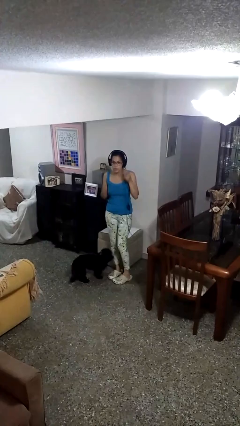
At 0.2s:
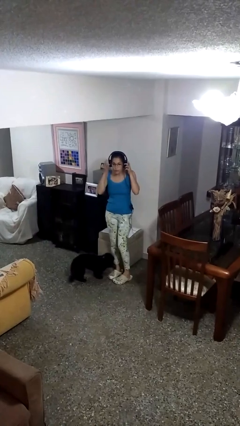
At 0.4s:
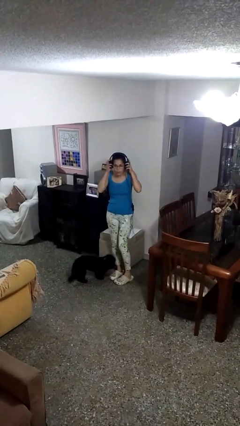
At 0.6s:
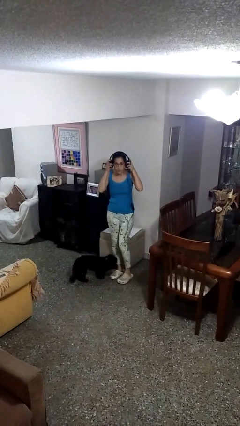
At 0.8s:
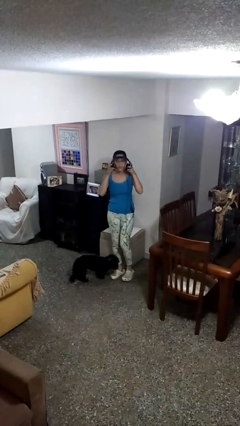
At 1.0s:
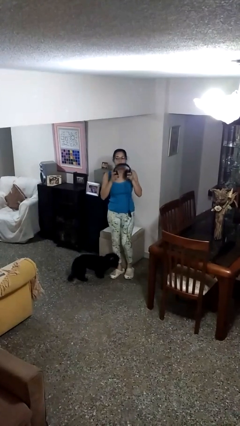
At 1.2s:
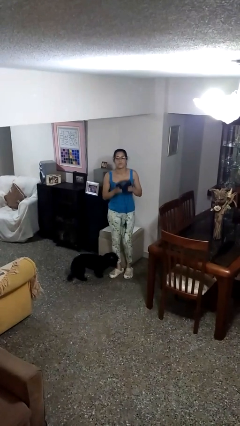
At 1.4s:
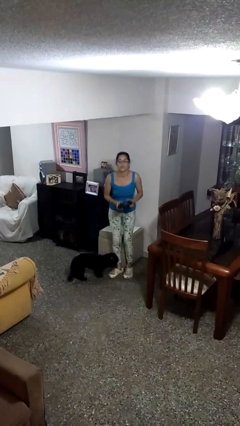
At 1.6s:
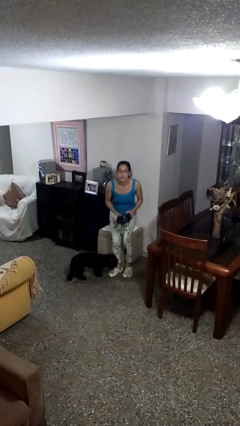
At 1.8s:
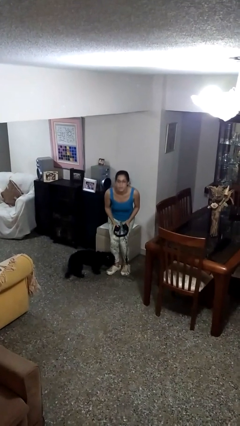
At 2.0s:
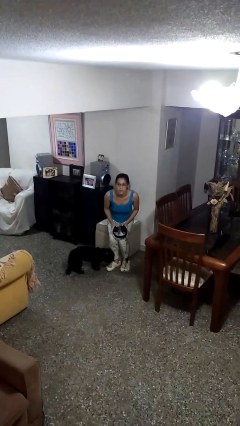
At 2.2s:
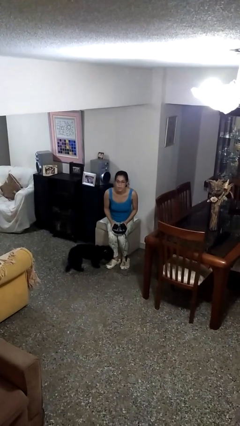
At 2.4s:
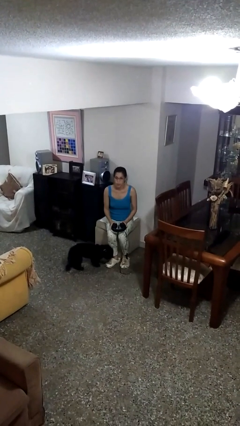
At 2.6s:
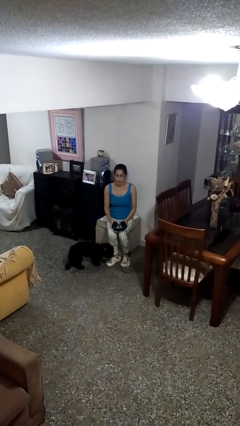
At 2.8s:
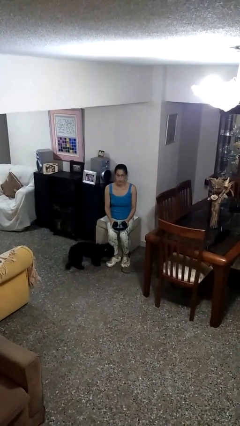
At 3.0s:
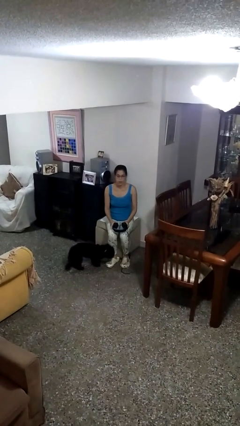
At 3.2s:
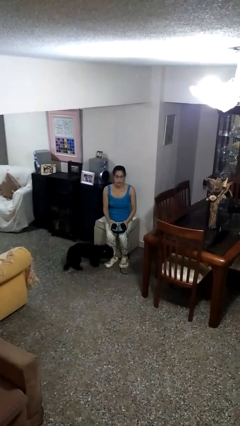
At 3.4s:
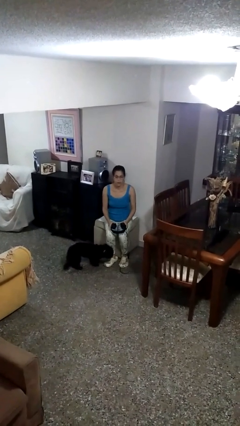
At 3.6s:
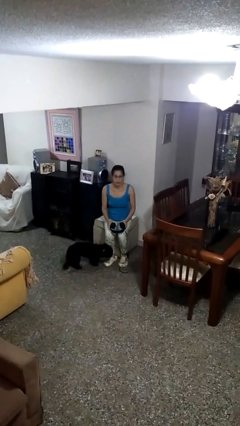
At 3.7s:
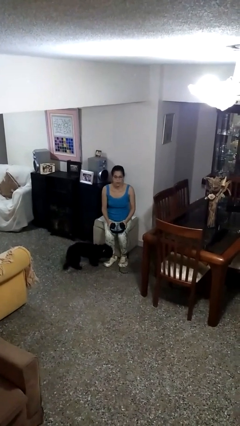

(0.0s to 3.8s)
person takes off headphones

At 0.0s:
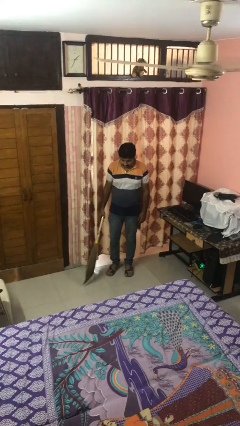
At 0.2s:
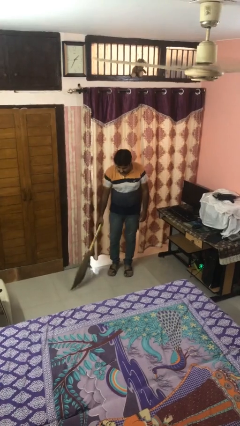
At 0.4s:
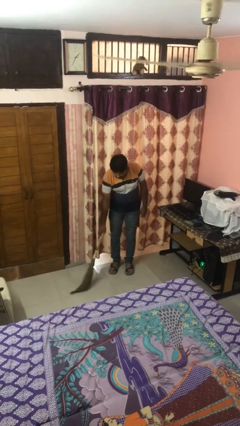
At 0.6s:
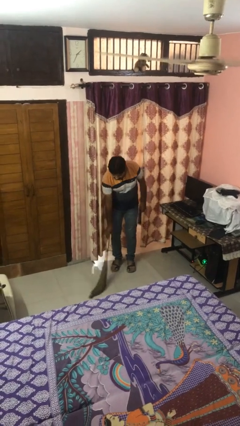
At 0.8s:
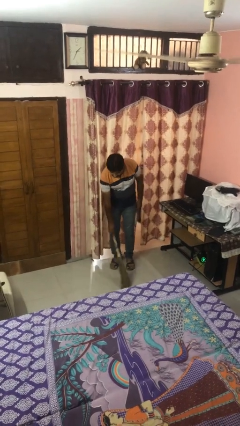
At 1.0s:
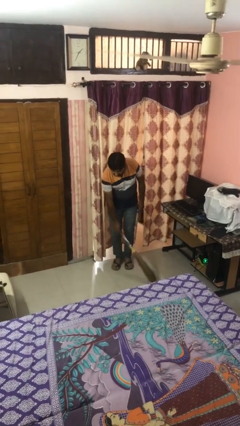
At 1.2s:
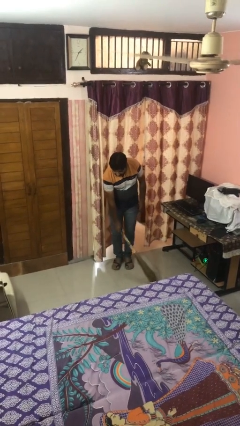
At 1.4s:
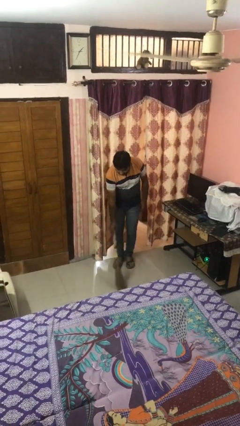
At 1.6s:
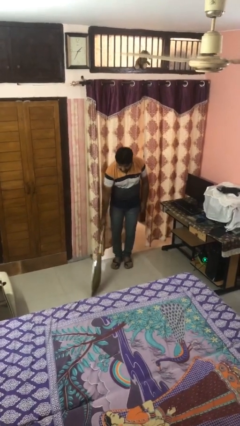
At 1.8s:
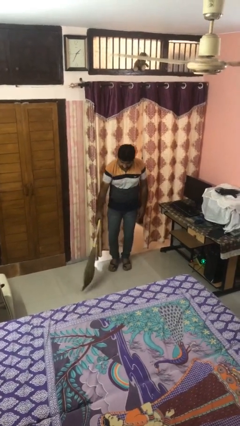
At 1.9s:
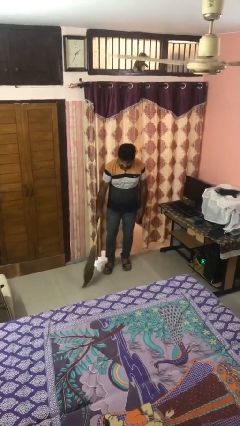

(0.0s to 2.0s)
person sweeps floor

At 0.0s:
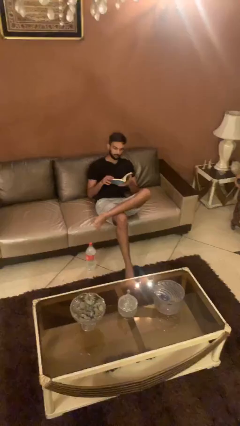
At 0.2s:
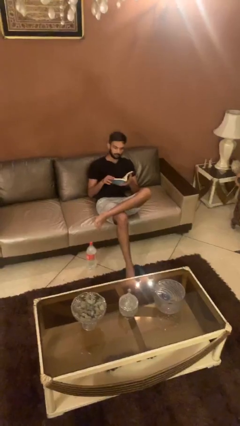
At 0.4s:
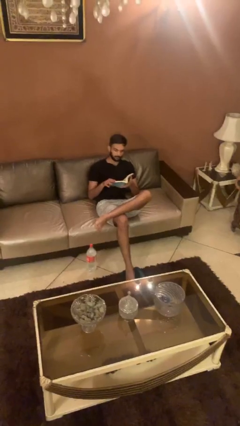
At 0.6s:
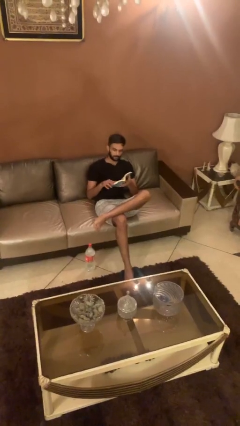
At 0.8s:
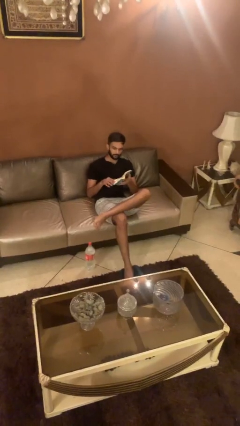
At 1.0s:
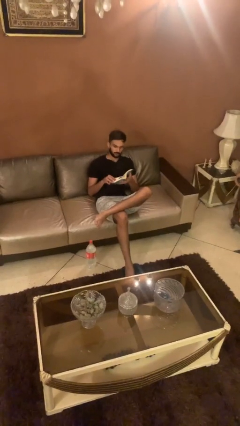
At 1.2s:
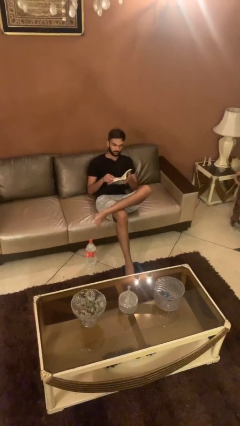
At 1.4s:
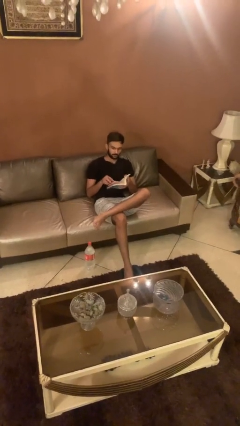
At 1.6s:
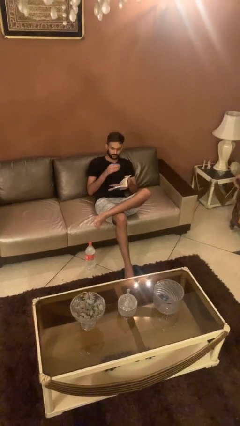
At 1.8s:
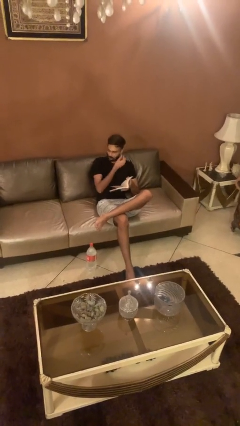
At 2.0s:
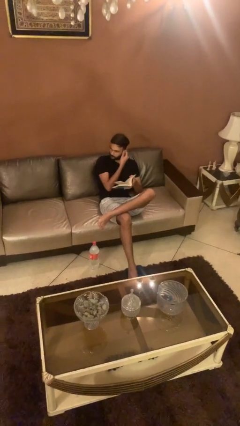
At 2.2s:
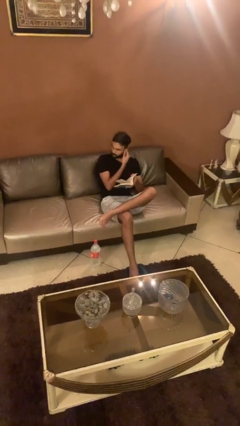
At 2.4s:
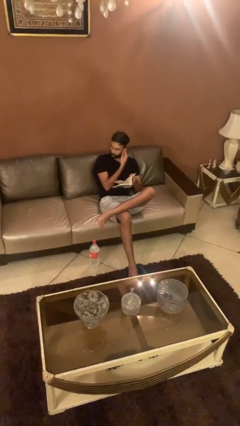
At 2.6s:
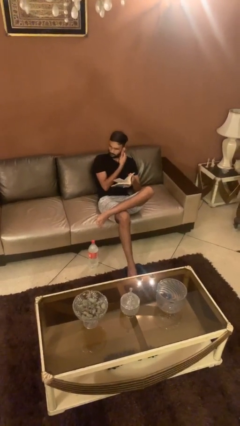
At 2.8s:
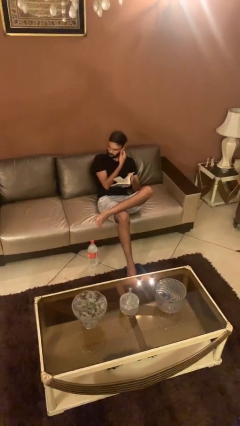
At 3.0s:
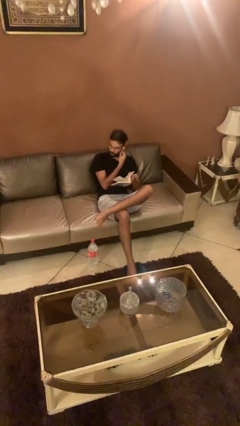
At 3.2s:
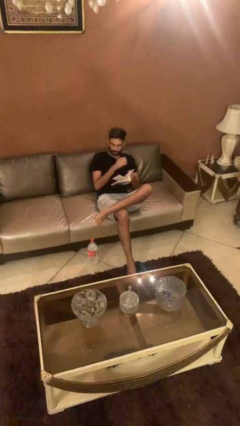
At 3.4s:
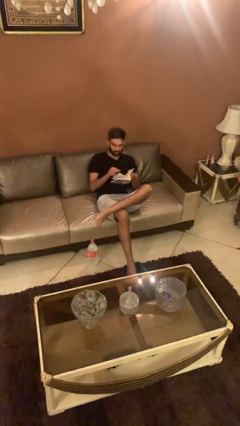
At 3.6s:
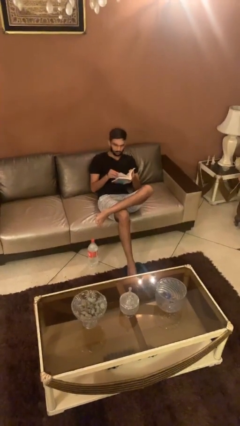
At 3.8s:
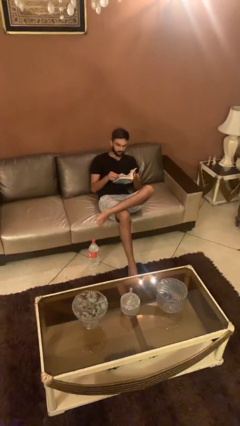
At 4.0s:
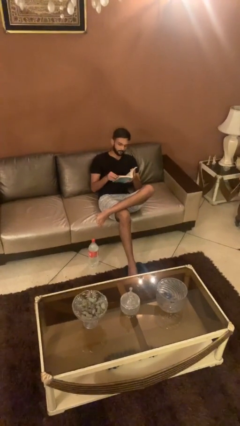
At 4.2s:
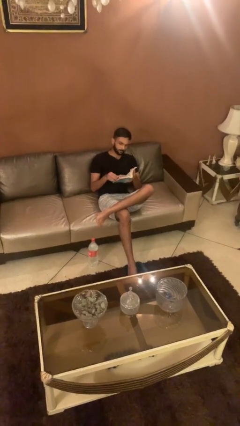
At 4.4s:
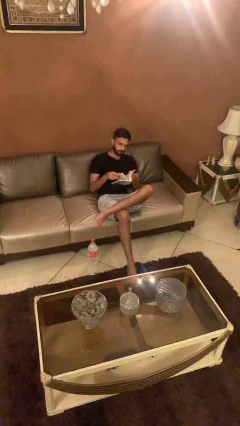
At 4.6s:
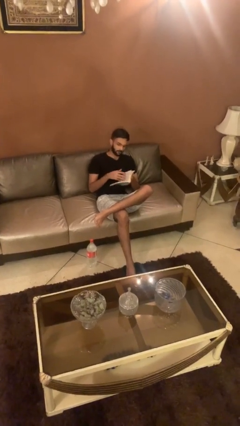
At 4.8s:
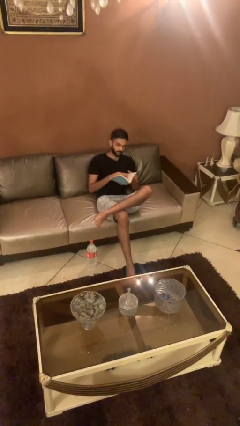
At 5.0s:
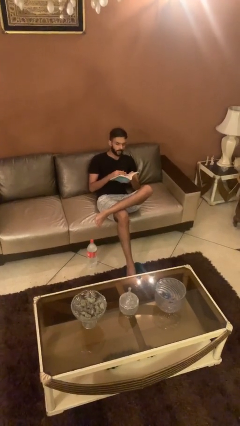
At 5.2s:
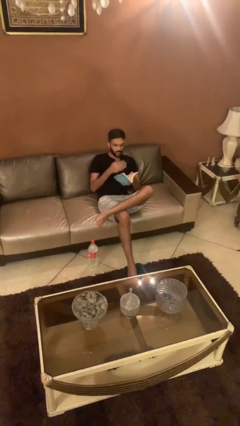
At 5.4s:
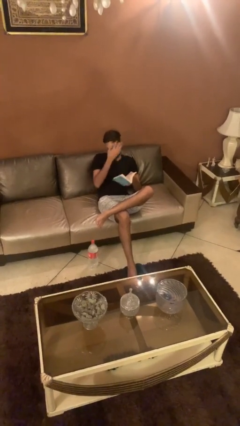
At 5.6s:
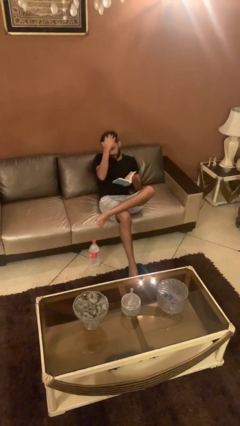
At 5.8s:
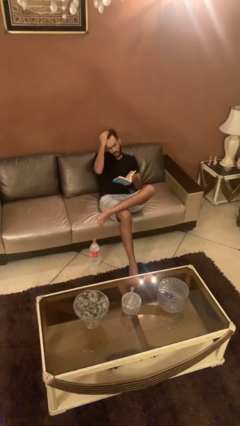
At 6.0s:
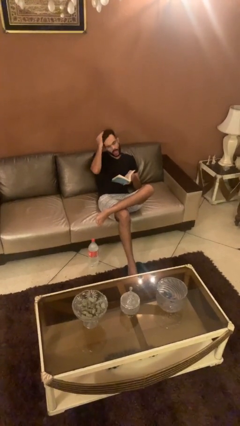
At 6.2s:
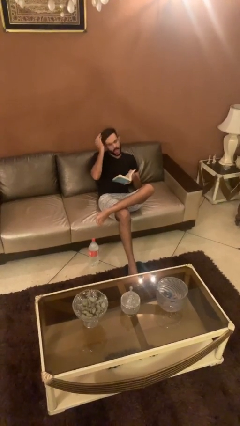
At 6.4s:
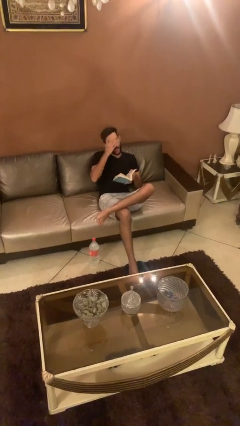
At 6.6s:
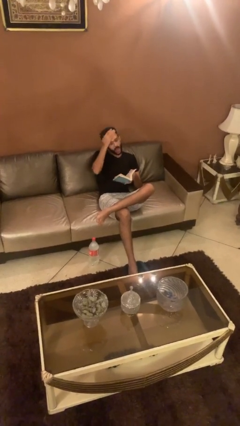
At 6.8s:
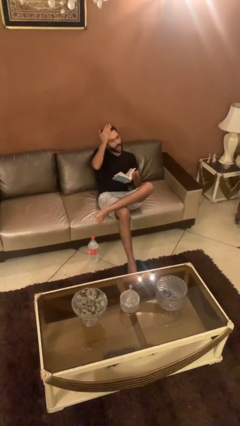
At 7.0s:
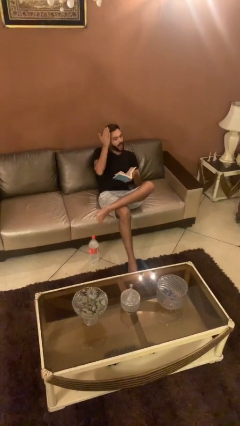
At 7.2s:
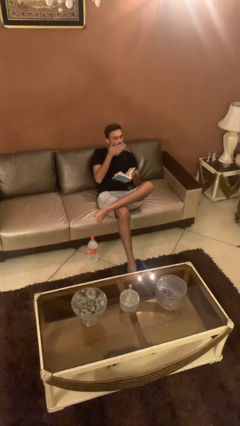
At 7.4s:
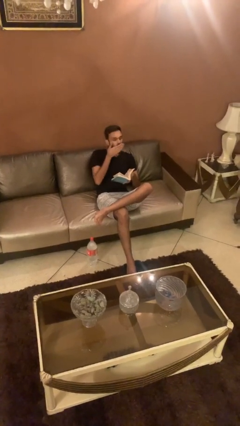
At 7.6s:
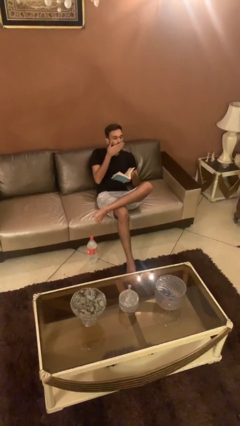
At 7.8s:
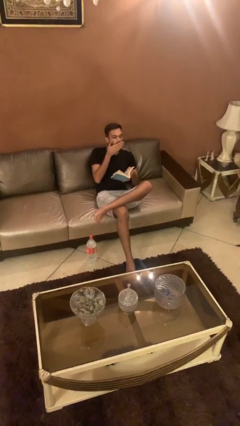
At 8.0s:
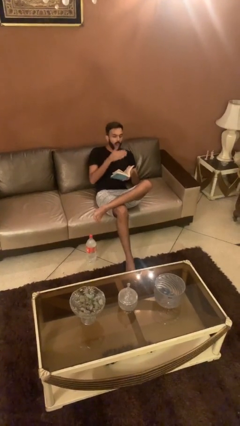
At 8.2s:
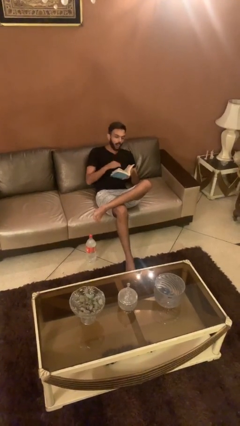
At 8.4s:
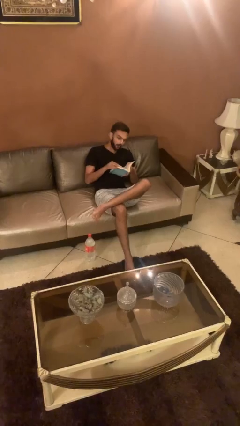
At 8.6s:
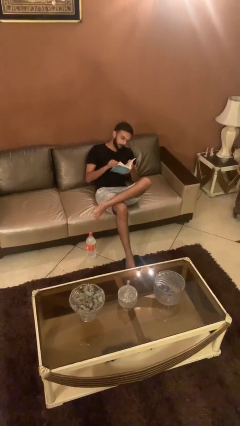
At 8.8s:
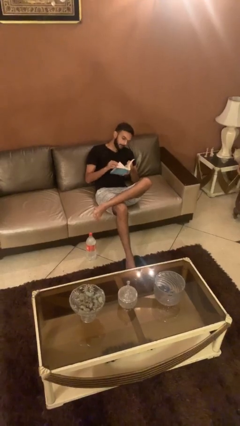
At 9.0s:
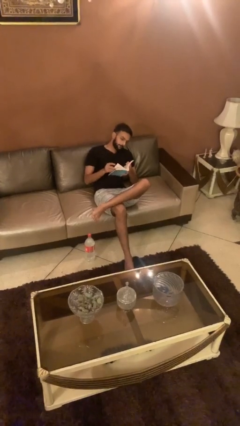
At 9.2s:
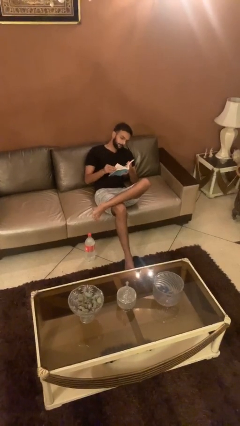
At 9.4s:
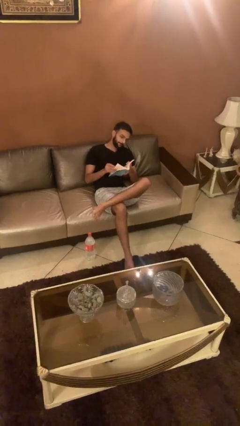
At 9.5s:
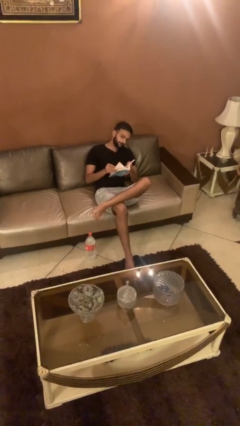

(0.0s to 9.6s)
person reads document

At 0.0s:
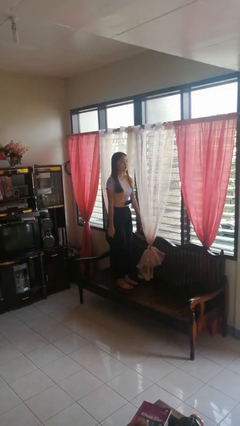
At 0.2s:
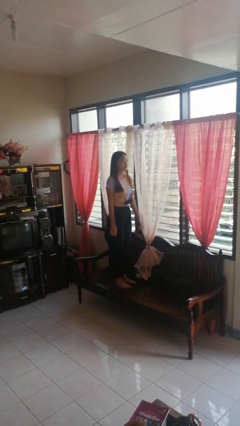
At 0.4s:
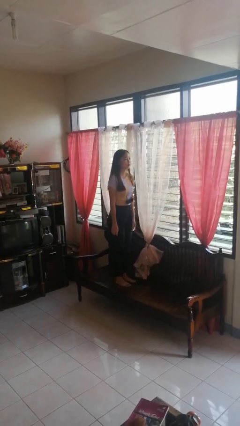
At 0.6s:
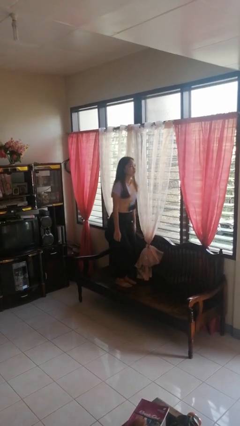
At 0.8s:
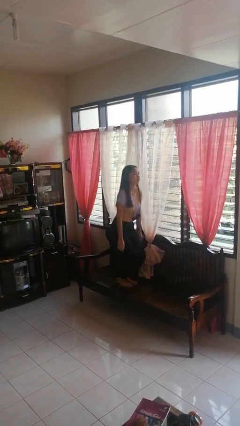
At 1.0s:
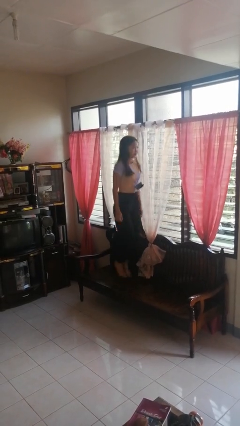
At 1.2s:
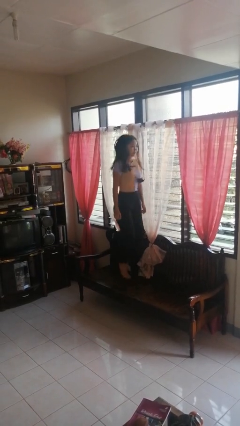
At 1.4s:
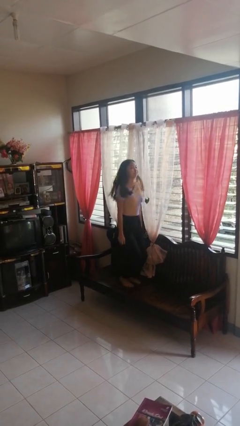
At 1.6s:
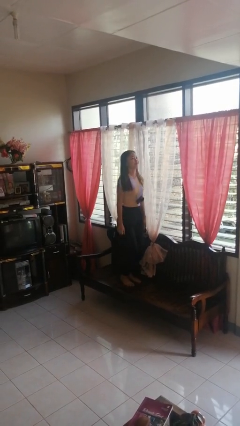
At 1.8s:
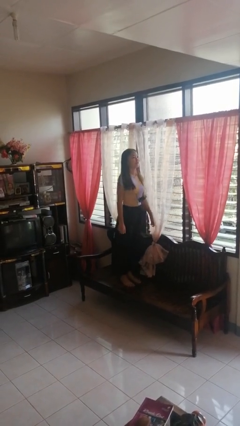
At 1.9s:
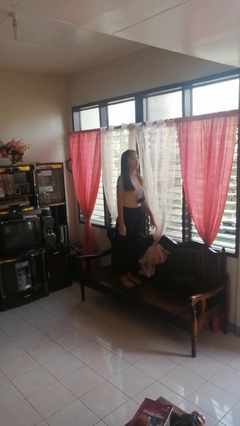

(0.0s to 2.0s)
person jumps on couch

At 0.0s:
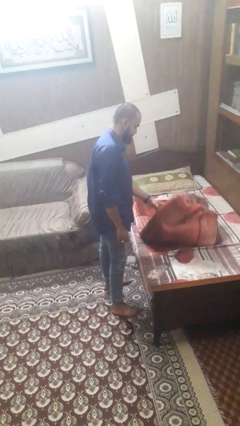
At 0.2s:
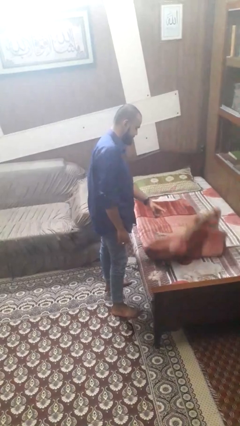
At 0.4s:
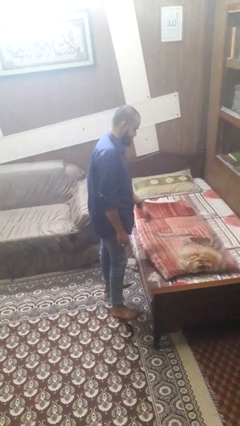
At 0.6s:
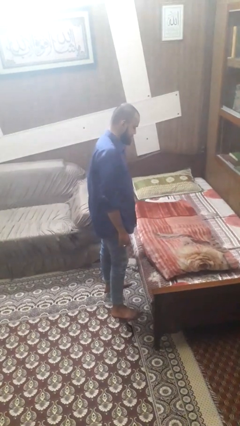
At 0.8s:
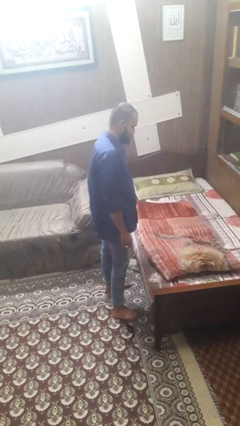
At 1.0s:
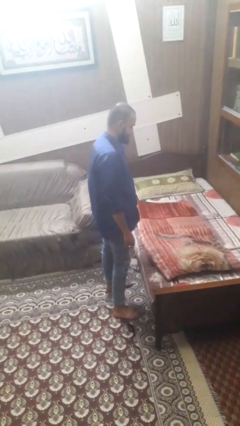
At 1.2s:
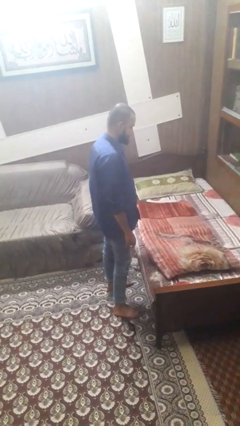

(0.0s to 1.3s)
person unfolds blanket
